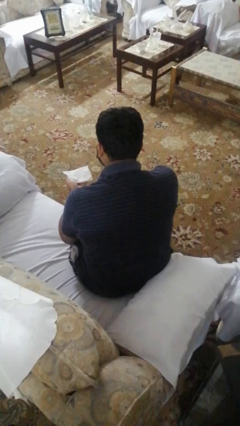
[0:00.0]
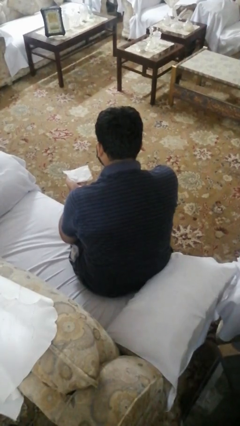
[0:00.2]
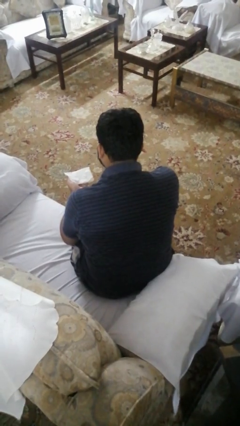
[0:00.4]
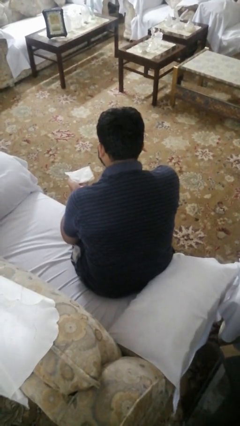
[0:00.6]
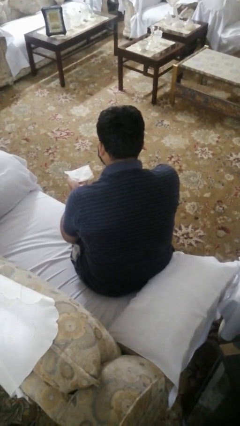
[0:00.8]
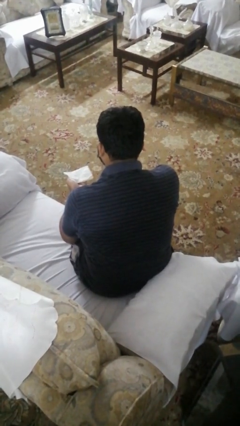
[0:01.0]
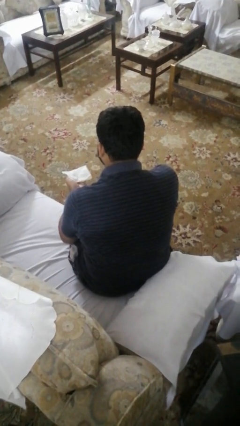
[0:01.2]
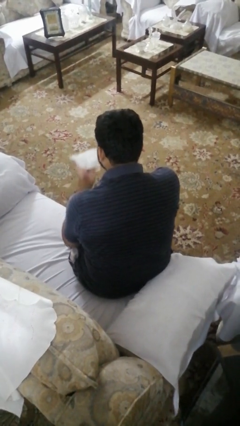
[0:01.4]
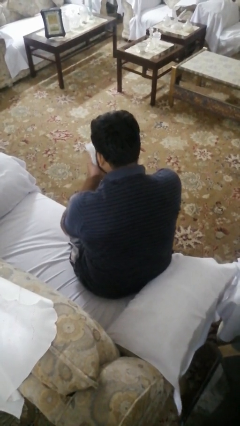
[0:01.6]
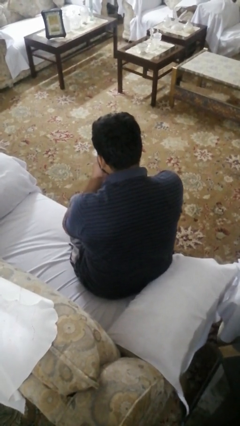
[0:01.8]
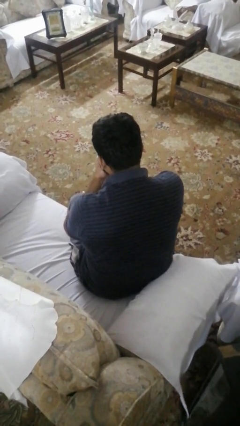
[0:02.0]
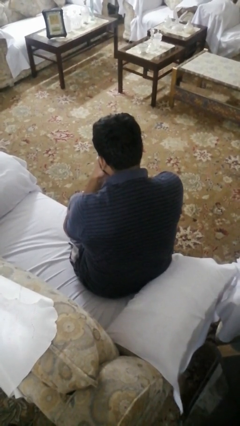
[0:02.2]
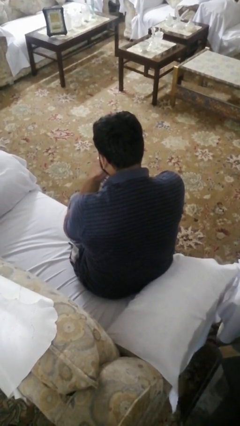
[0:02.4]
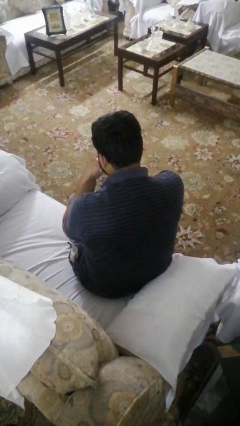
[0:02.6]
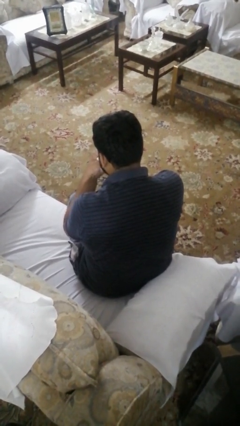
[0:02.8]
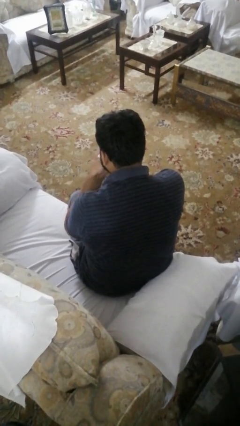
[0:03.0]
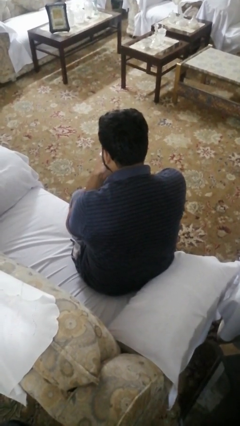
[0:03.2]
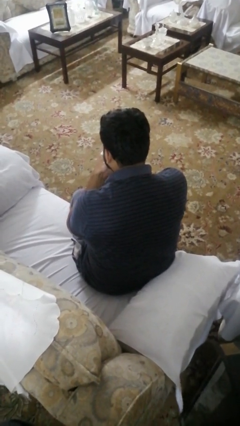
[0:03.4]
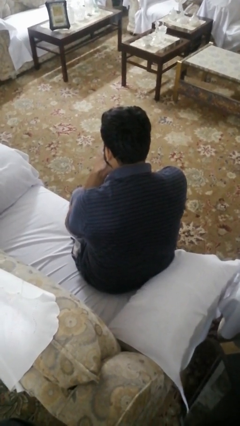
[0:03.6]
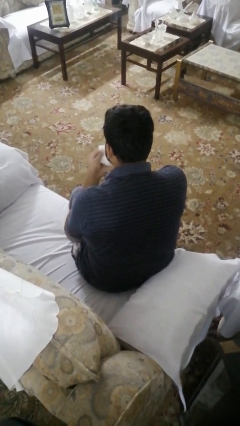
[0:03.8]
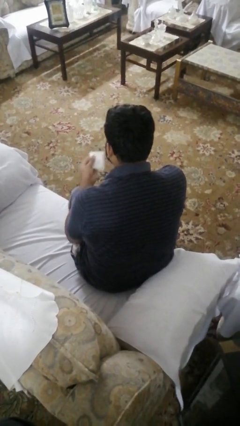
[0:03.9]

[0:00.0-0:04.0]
person blows nose

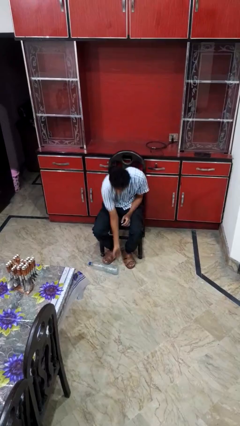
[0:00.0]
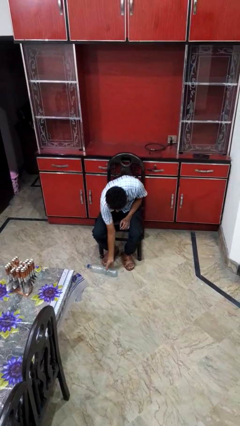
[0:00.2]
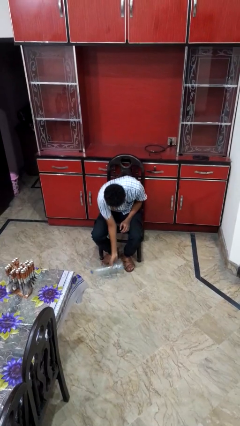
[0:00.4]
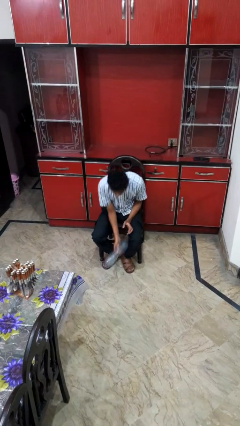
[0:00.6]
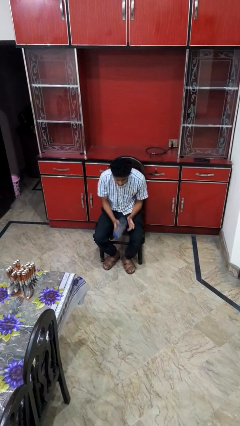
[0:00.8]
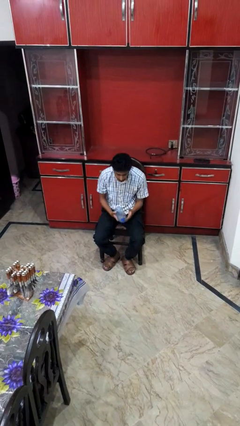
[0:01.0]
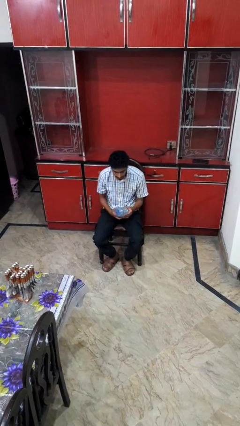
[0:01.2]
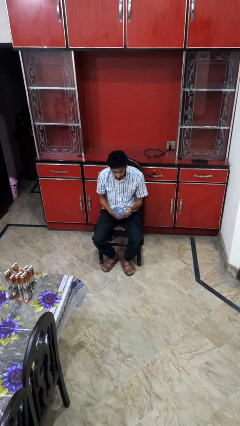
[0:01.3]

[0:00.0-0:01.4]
person picks up object from floor

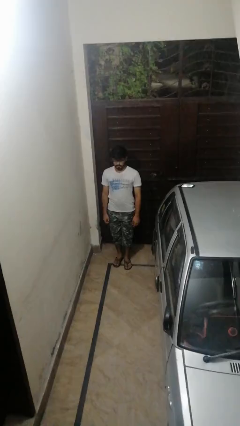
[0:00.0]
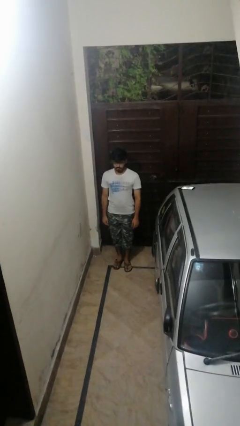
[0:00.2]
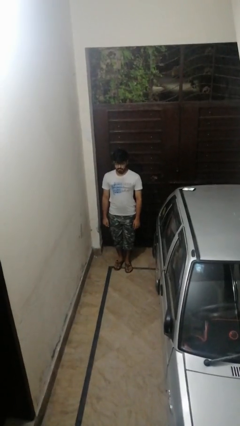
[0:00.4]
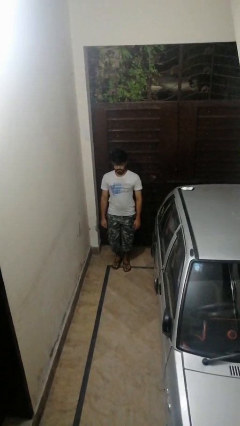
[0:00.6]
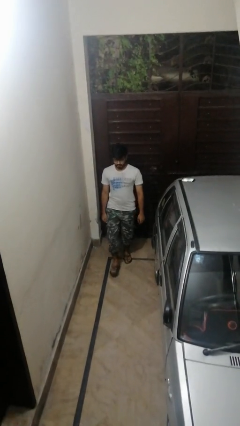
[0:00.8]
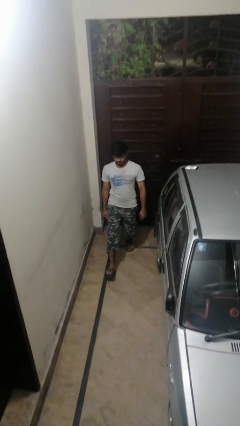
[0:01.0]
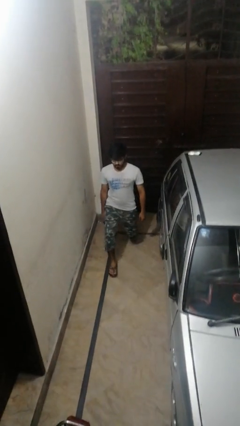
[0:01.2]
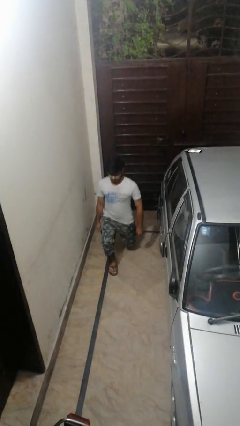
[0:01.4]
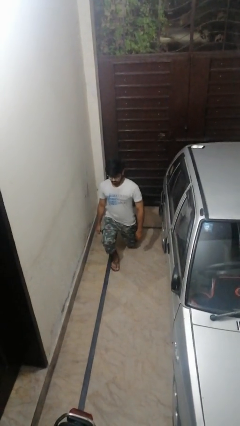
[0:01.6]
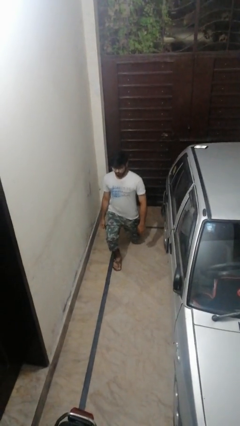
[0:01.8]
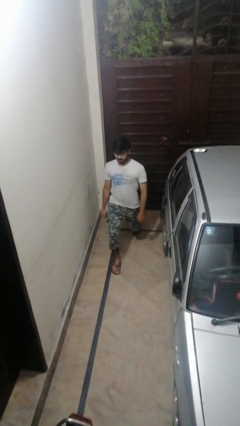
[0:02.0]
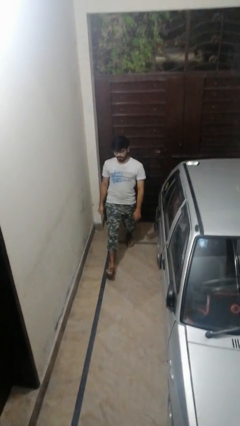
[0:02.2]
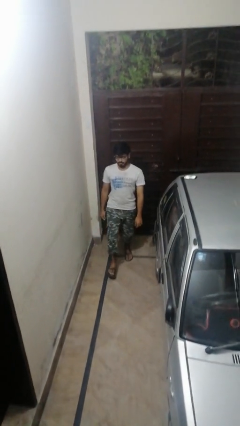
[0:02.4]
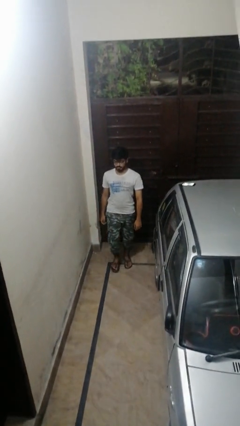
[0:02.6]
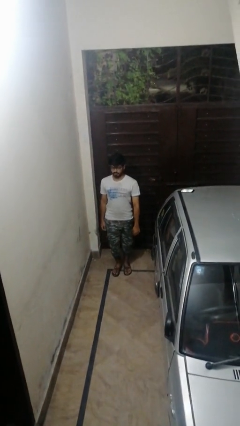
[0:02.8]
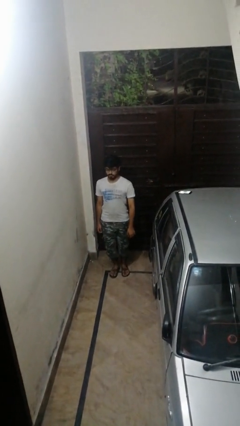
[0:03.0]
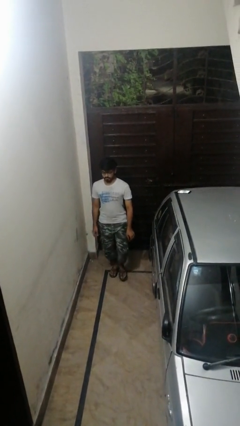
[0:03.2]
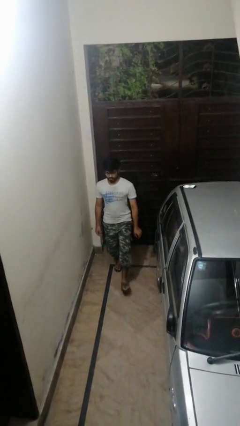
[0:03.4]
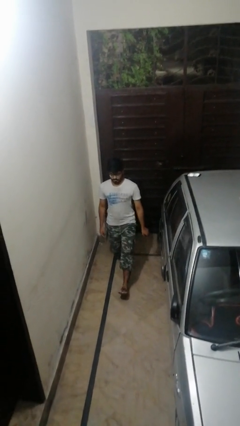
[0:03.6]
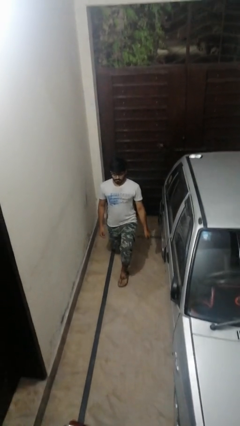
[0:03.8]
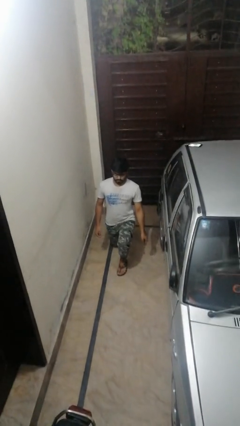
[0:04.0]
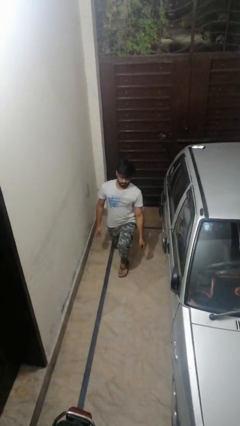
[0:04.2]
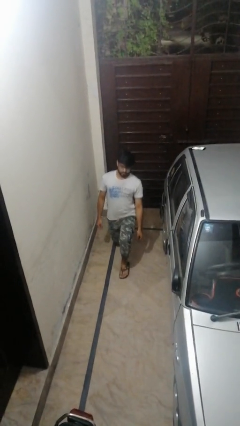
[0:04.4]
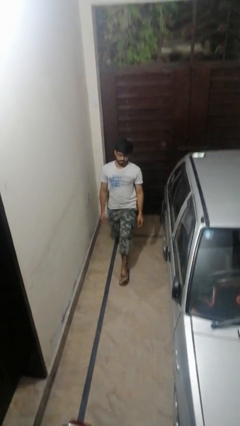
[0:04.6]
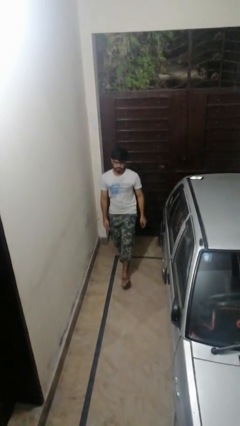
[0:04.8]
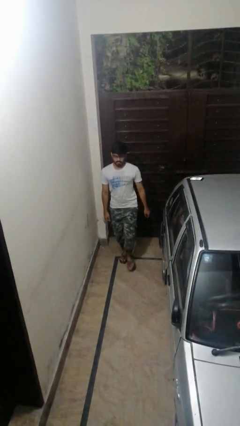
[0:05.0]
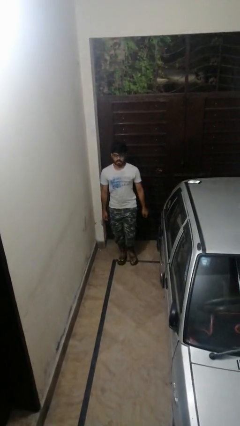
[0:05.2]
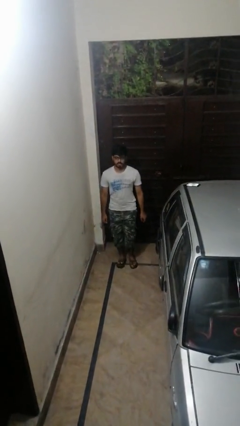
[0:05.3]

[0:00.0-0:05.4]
person exercises with lunges

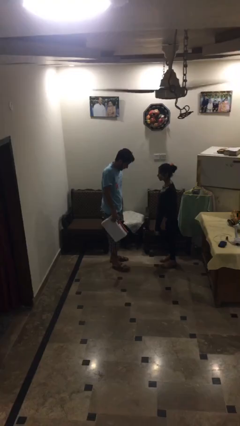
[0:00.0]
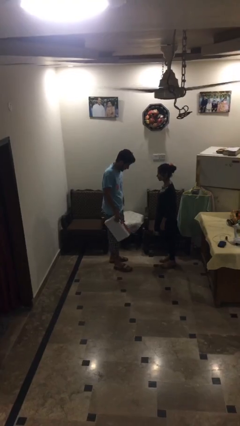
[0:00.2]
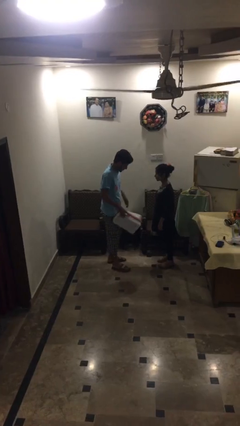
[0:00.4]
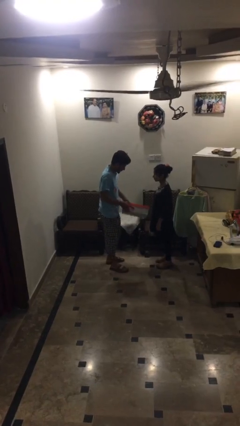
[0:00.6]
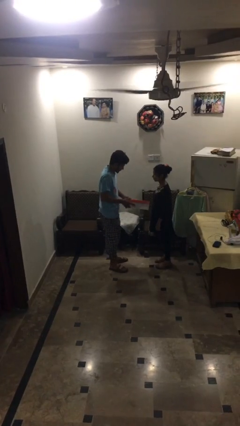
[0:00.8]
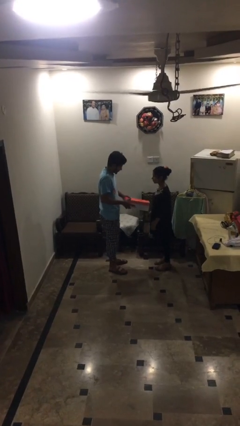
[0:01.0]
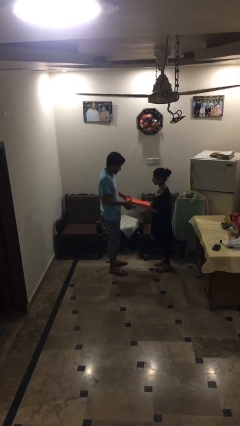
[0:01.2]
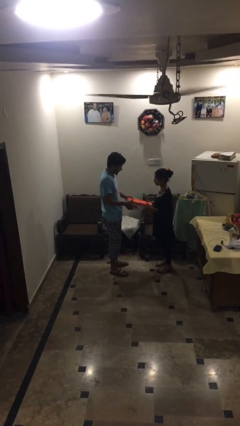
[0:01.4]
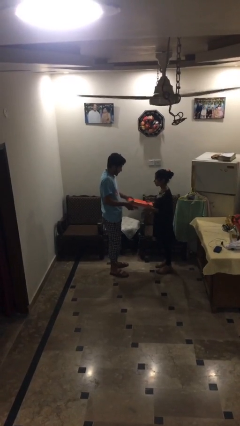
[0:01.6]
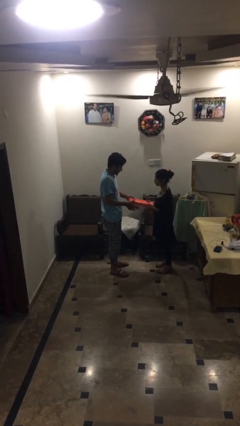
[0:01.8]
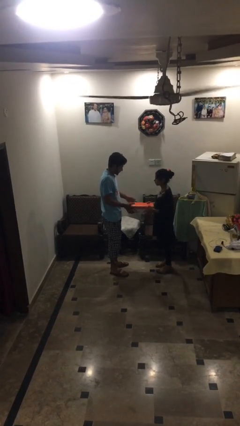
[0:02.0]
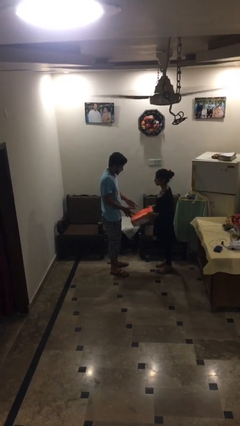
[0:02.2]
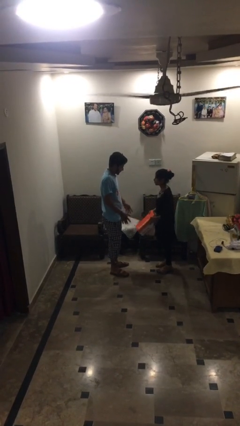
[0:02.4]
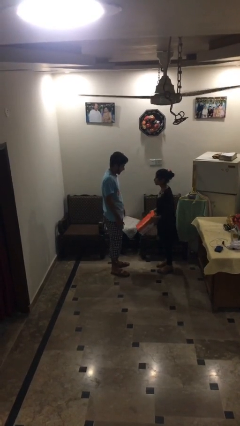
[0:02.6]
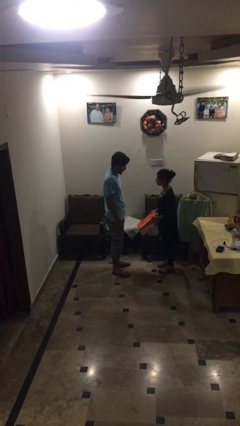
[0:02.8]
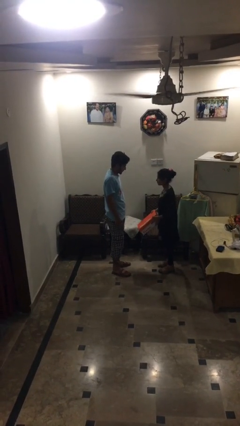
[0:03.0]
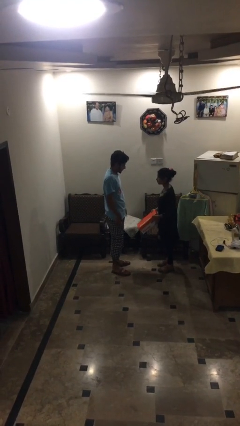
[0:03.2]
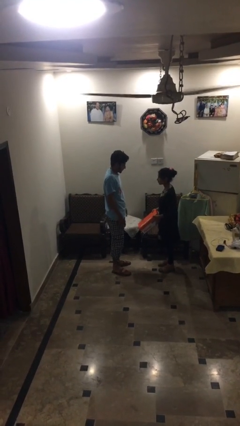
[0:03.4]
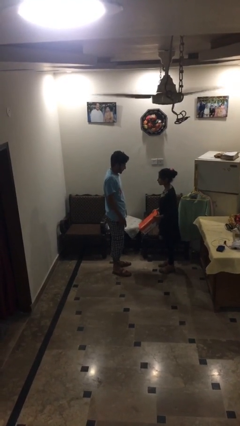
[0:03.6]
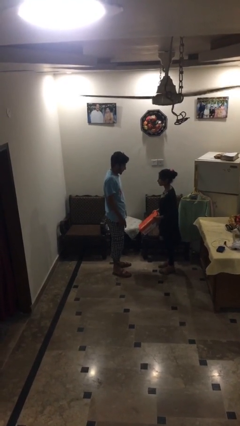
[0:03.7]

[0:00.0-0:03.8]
person transfers object to person

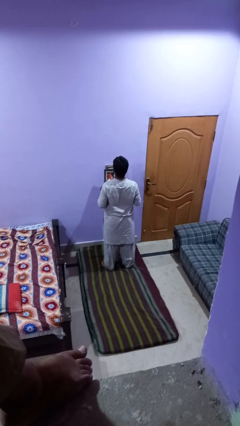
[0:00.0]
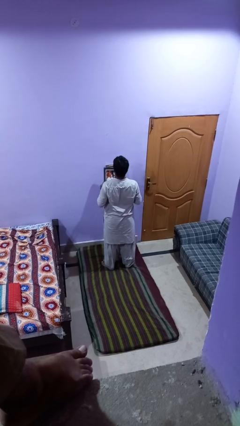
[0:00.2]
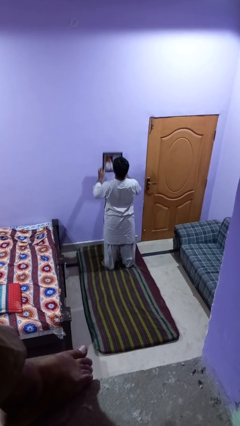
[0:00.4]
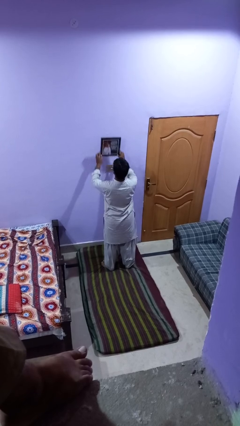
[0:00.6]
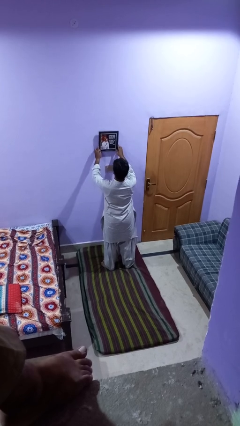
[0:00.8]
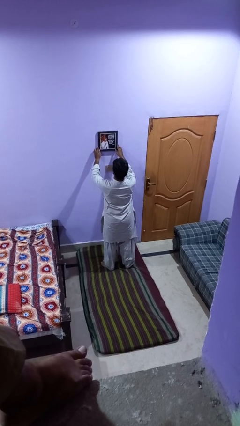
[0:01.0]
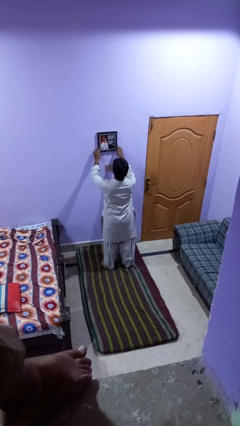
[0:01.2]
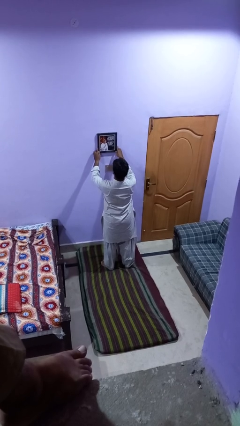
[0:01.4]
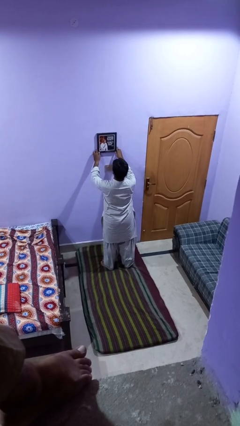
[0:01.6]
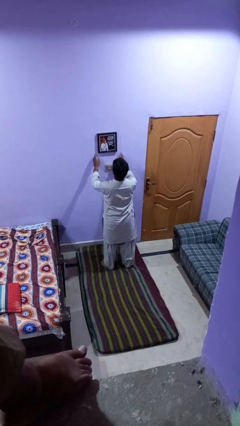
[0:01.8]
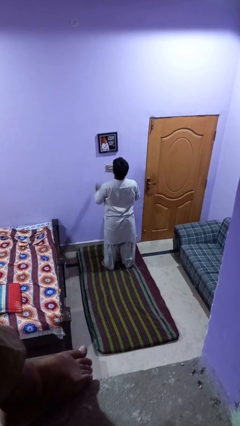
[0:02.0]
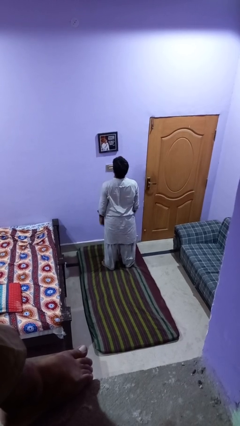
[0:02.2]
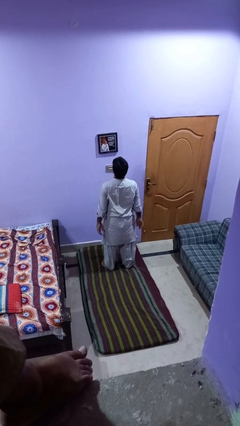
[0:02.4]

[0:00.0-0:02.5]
person puts up picture frame

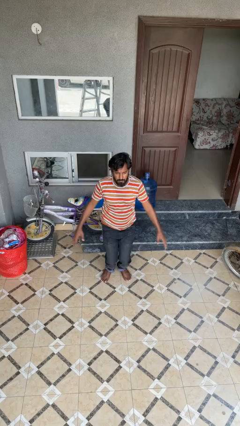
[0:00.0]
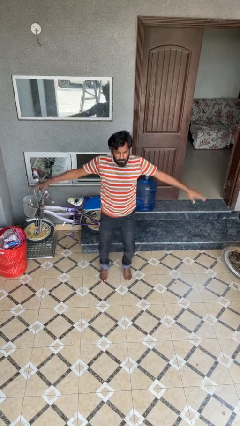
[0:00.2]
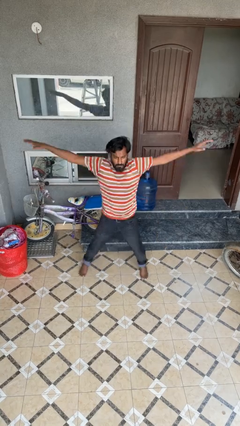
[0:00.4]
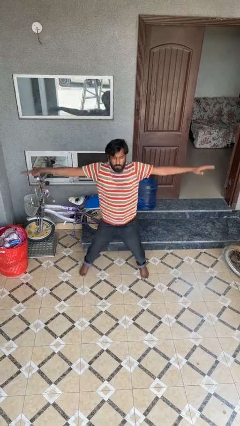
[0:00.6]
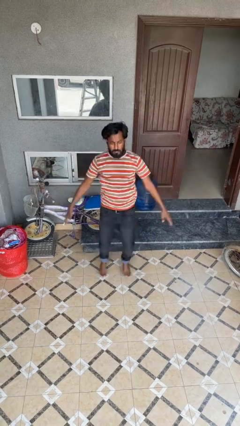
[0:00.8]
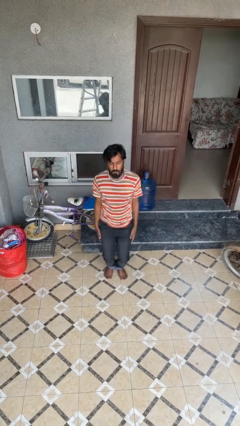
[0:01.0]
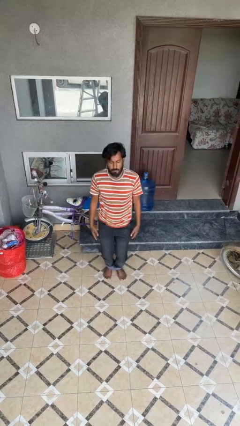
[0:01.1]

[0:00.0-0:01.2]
person exercises with jumping jacks
